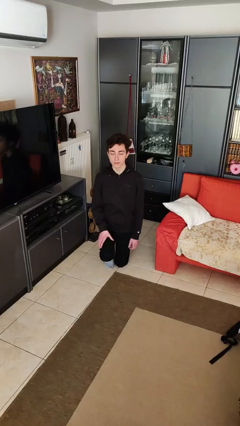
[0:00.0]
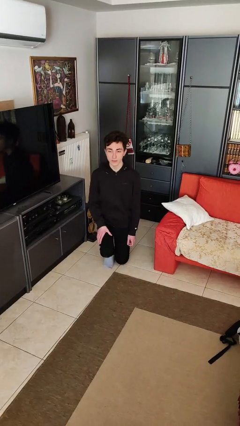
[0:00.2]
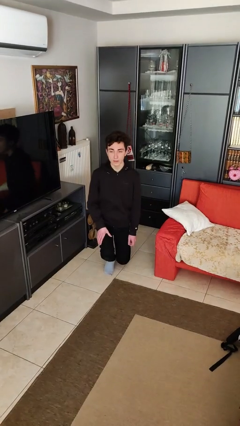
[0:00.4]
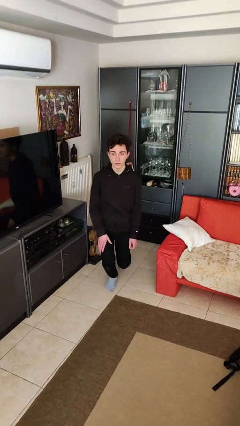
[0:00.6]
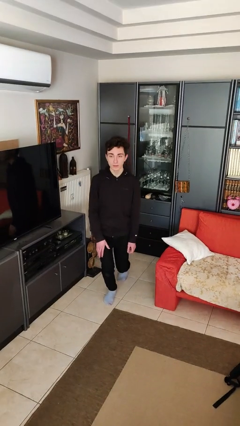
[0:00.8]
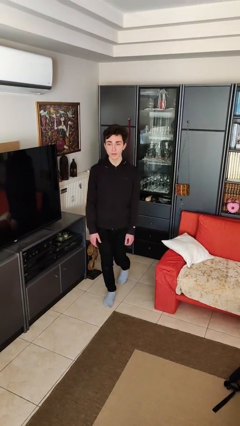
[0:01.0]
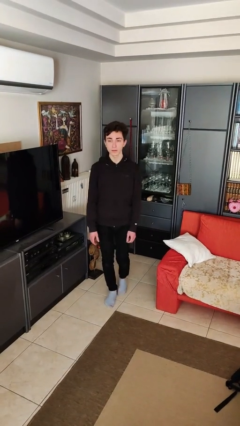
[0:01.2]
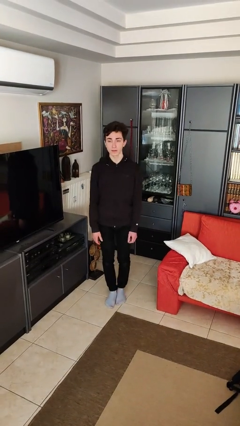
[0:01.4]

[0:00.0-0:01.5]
person stands up from floor

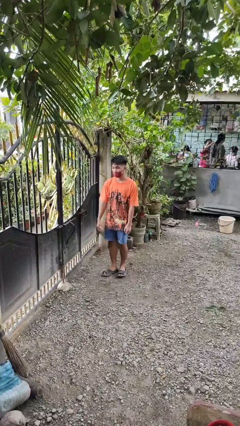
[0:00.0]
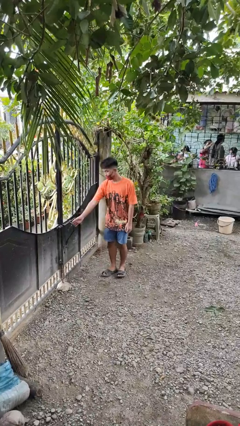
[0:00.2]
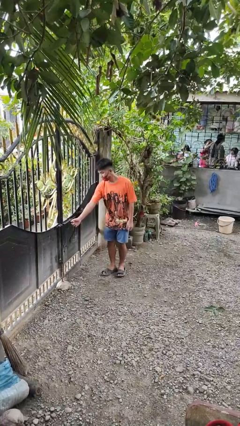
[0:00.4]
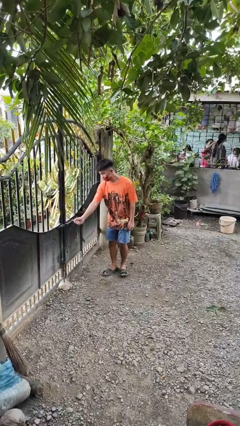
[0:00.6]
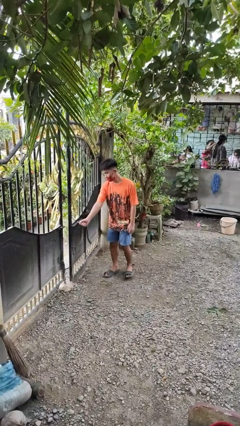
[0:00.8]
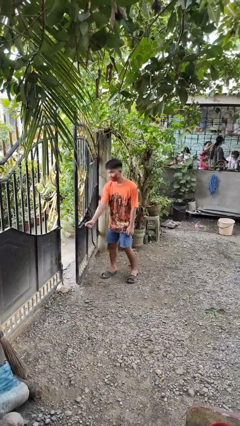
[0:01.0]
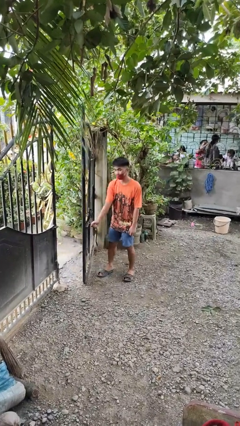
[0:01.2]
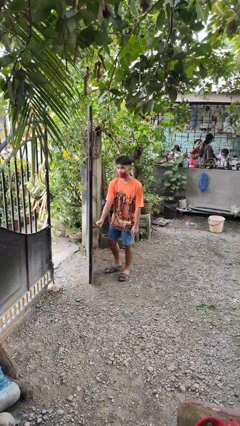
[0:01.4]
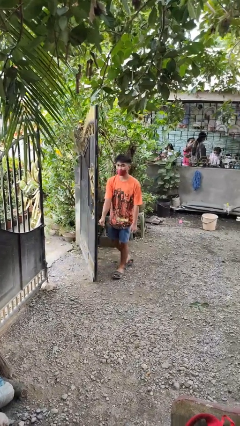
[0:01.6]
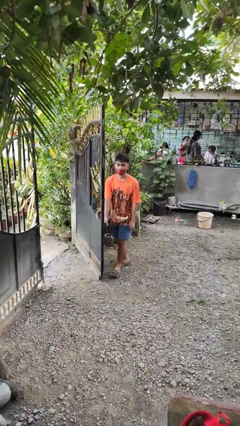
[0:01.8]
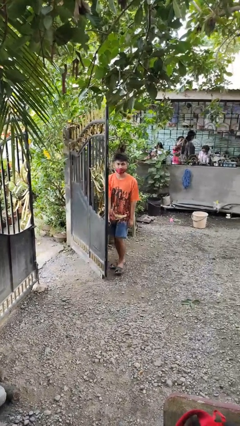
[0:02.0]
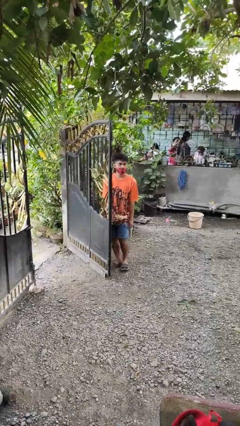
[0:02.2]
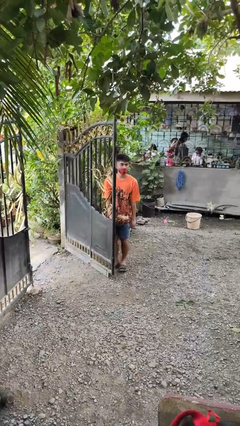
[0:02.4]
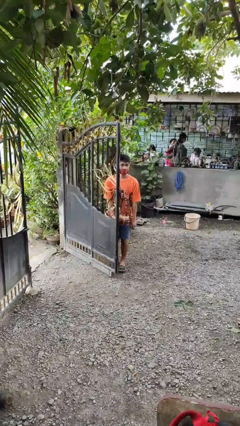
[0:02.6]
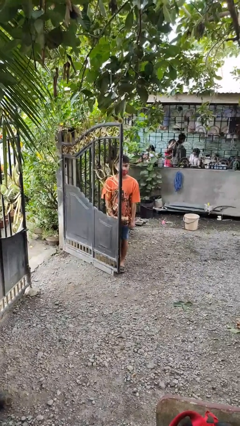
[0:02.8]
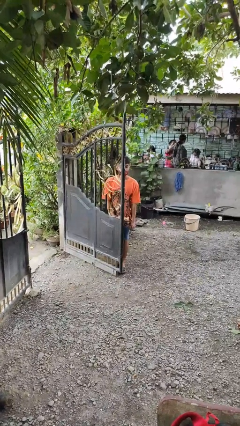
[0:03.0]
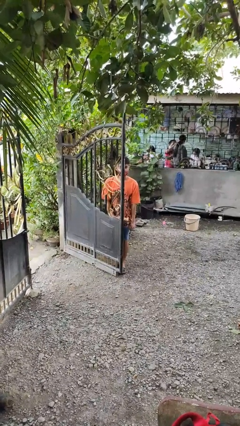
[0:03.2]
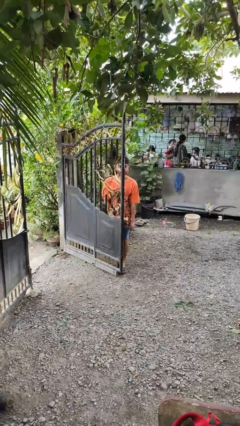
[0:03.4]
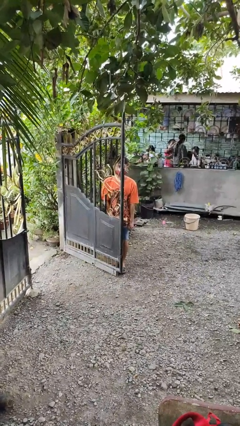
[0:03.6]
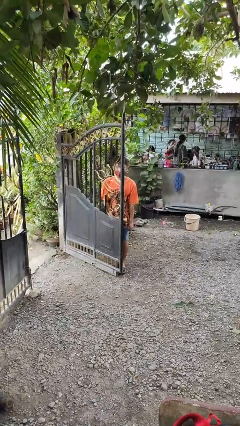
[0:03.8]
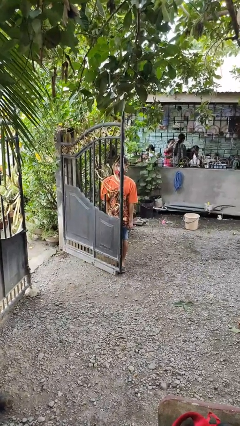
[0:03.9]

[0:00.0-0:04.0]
person opens gate

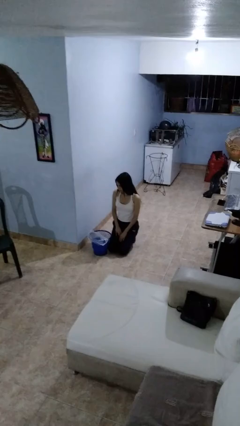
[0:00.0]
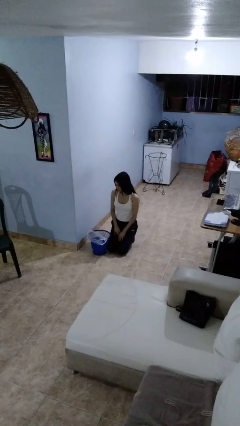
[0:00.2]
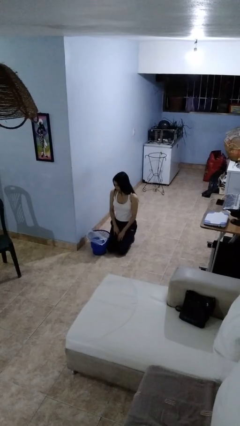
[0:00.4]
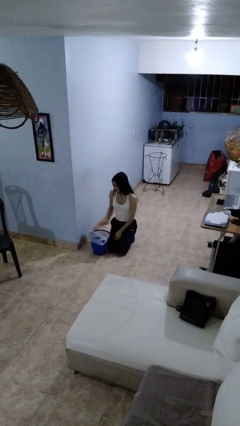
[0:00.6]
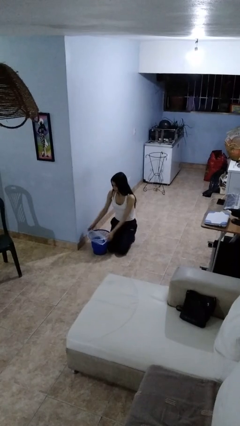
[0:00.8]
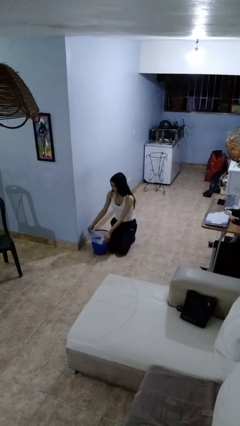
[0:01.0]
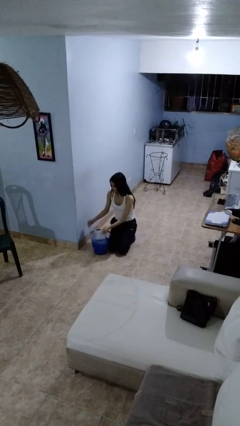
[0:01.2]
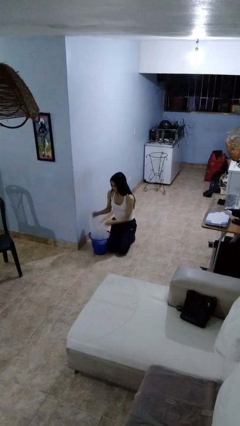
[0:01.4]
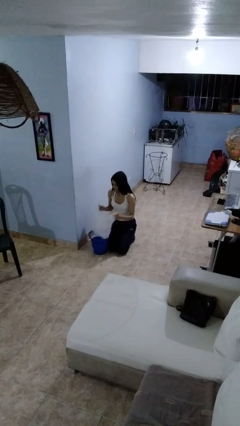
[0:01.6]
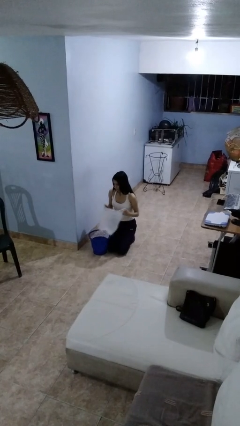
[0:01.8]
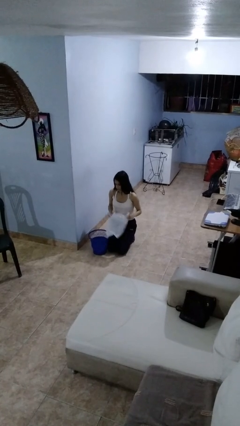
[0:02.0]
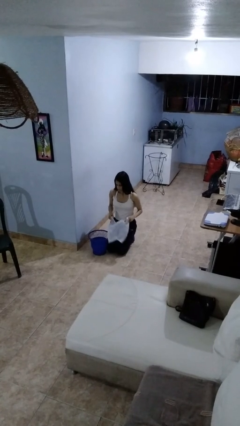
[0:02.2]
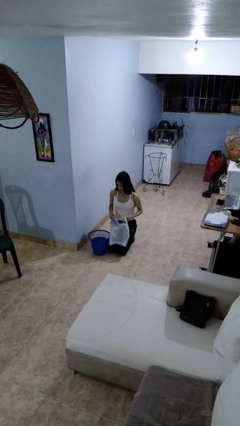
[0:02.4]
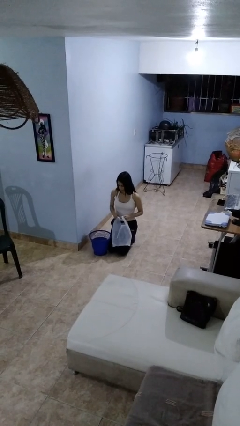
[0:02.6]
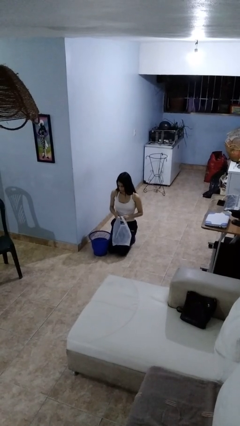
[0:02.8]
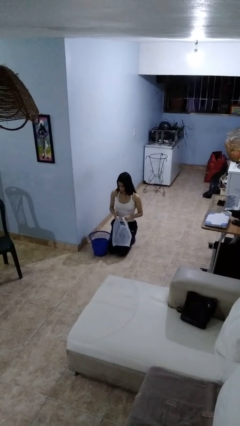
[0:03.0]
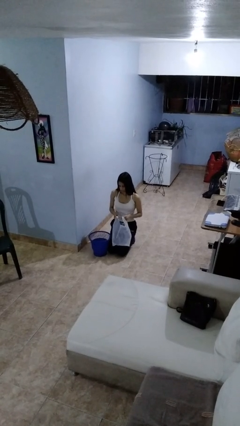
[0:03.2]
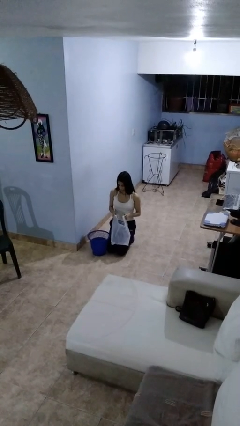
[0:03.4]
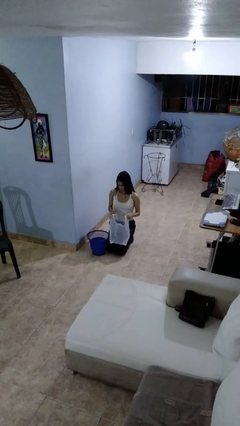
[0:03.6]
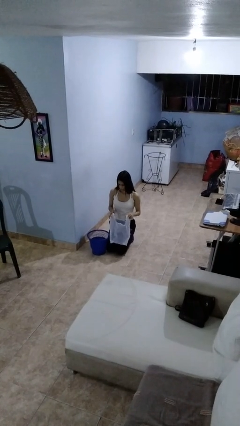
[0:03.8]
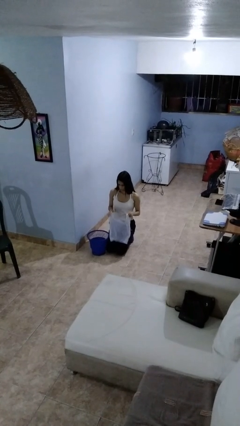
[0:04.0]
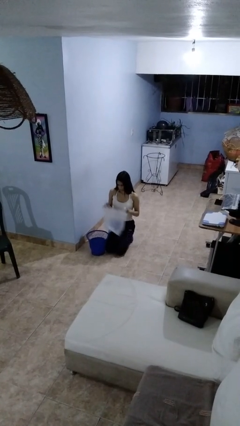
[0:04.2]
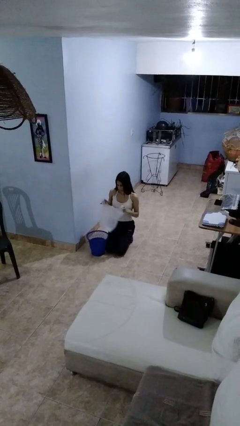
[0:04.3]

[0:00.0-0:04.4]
person removes trashbag from trashcan

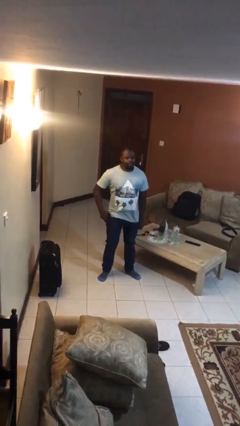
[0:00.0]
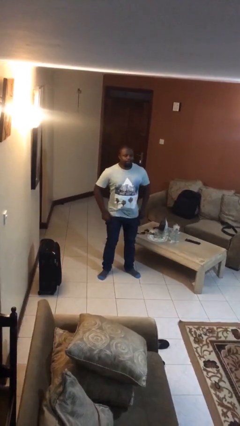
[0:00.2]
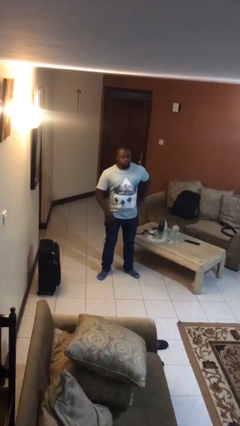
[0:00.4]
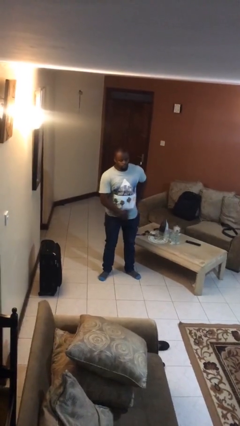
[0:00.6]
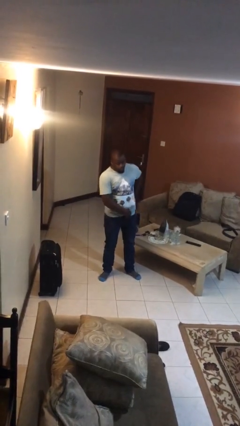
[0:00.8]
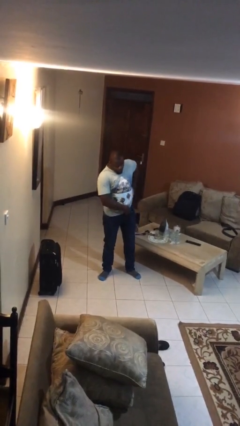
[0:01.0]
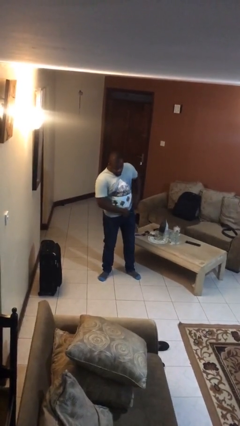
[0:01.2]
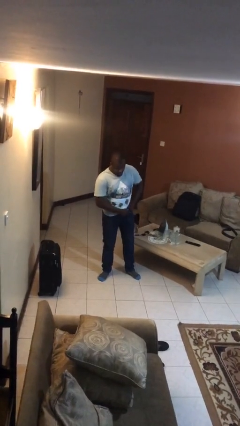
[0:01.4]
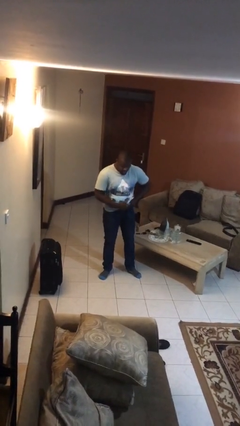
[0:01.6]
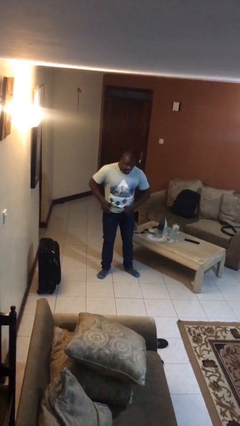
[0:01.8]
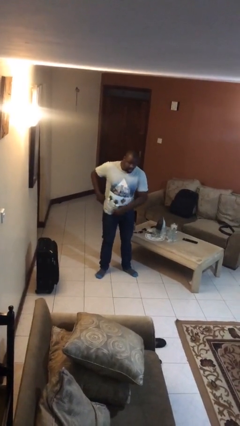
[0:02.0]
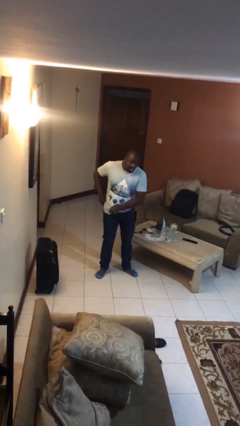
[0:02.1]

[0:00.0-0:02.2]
person hikes up pants

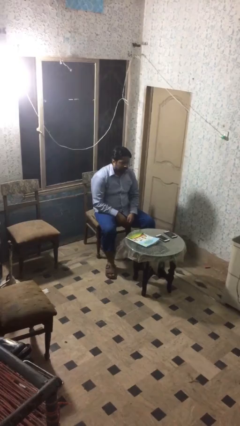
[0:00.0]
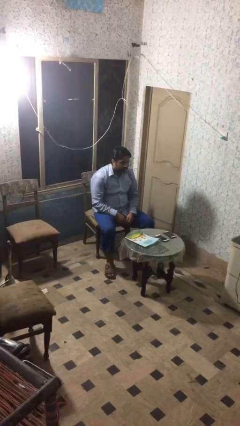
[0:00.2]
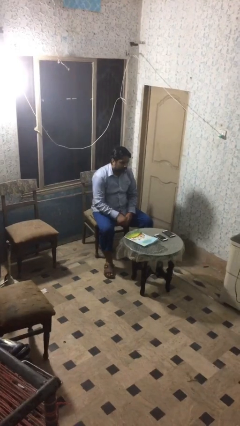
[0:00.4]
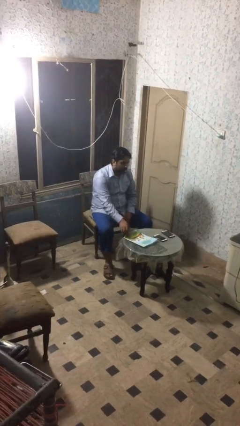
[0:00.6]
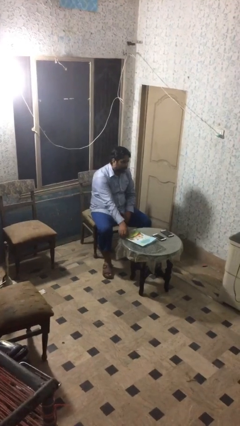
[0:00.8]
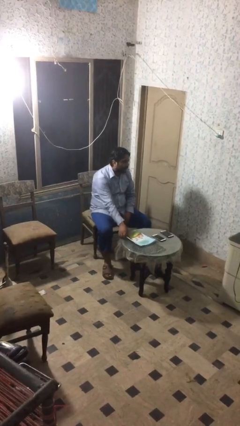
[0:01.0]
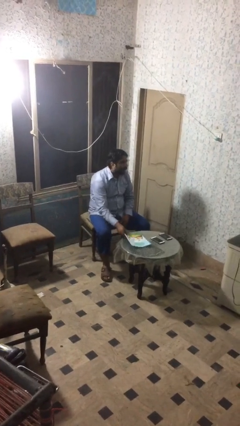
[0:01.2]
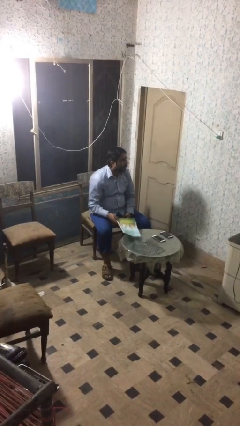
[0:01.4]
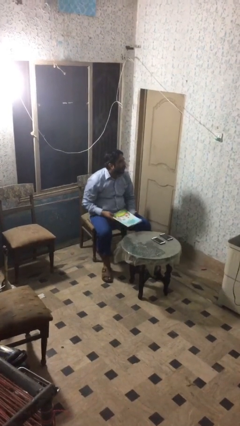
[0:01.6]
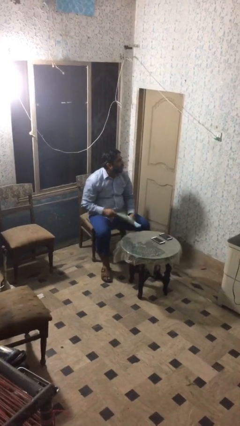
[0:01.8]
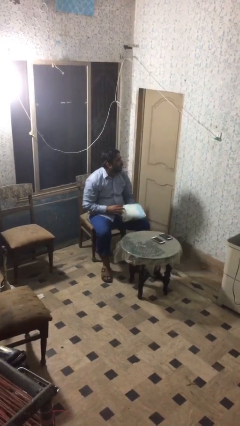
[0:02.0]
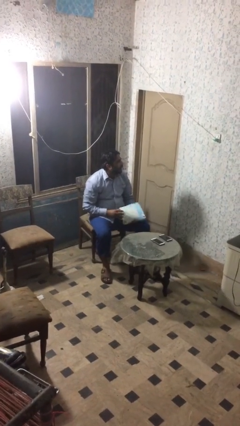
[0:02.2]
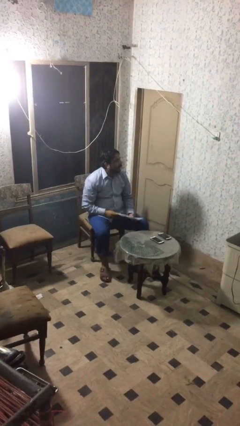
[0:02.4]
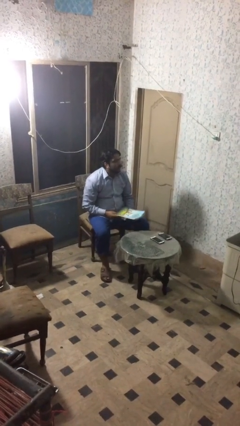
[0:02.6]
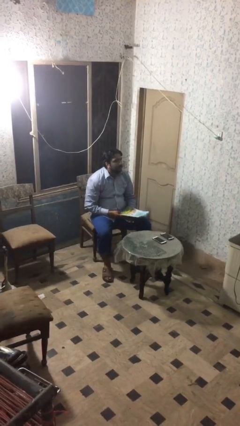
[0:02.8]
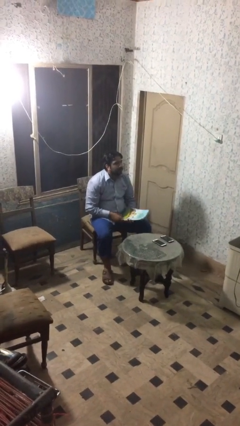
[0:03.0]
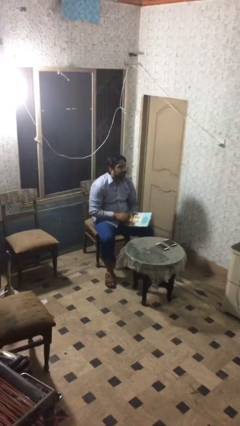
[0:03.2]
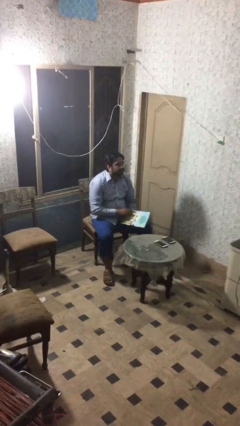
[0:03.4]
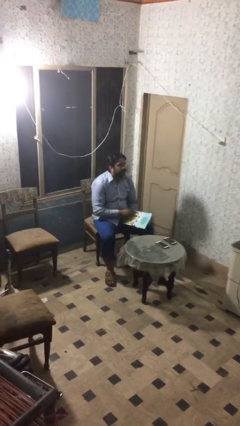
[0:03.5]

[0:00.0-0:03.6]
person picks up object from table

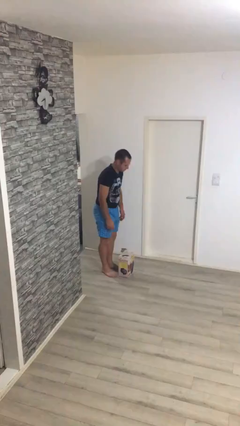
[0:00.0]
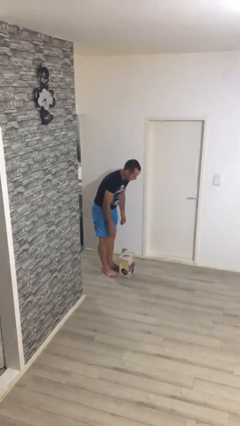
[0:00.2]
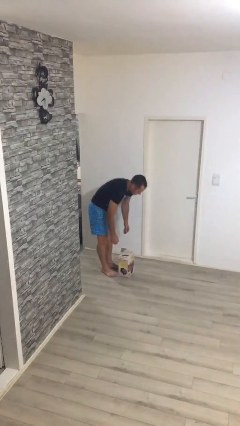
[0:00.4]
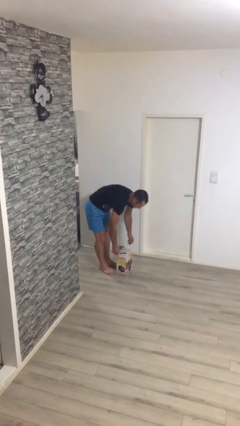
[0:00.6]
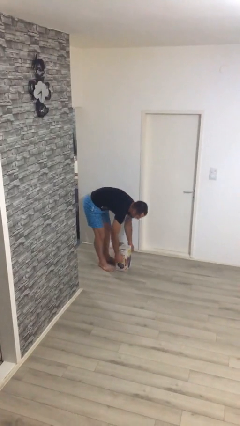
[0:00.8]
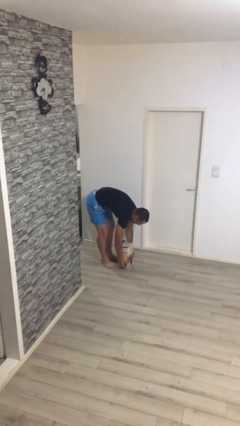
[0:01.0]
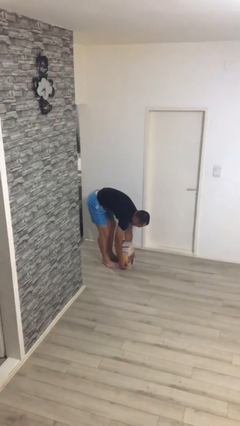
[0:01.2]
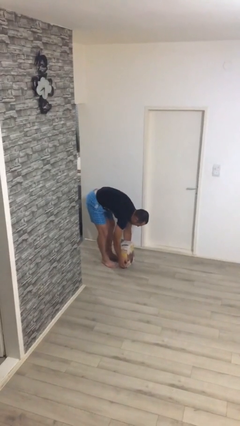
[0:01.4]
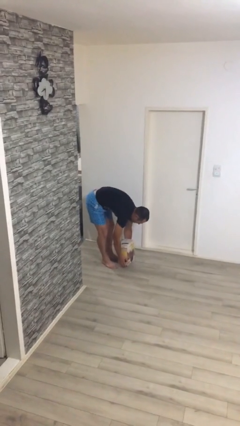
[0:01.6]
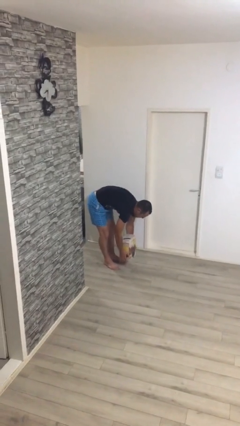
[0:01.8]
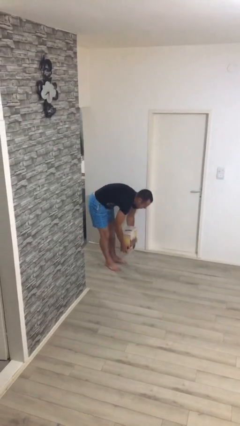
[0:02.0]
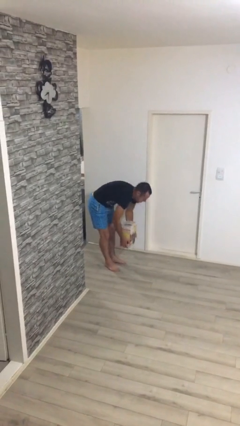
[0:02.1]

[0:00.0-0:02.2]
person picks up object from floor
